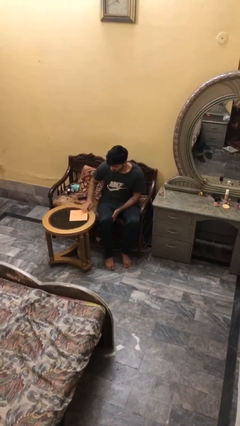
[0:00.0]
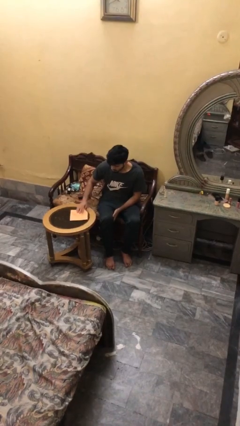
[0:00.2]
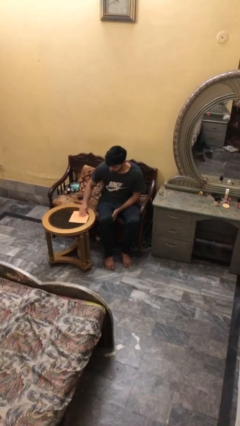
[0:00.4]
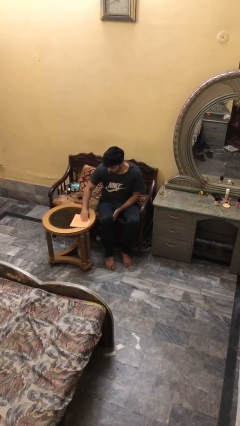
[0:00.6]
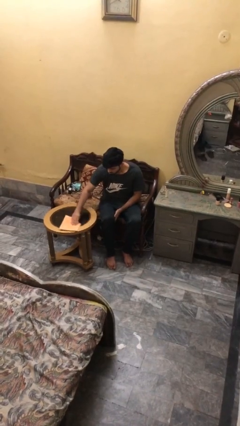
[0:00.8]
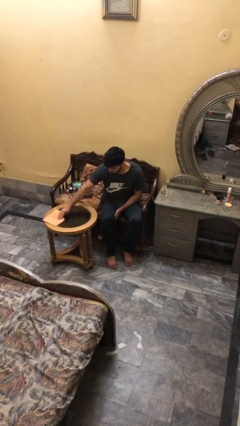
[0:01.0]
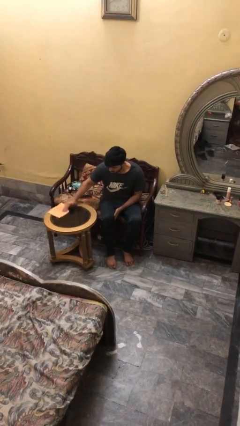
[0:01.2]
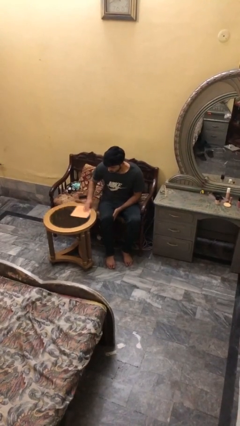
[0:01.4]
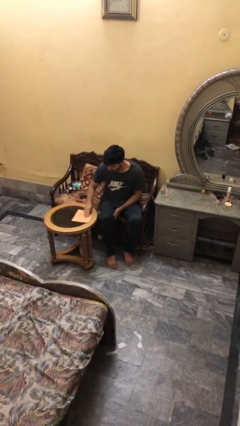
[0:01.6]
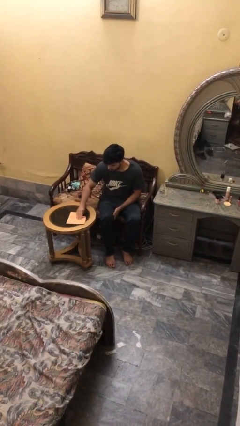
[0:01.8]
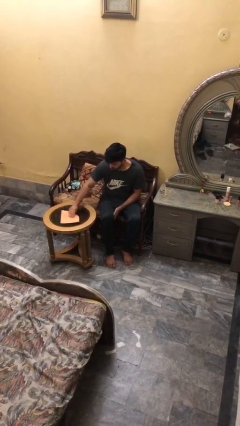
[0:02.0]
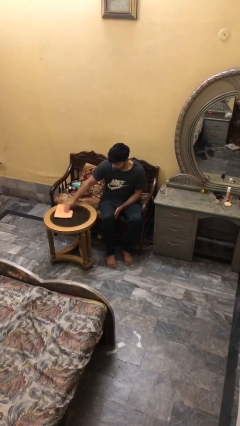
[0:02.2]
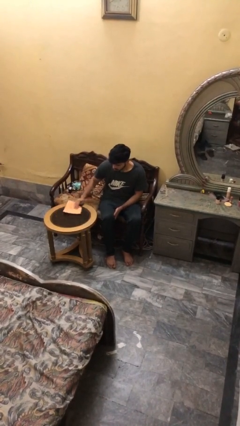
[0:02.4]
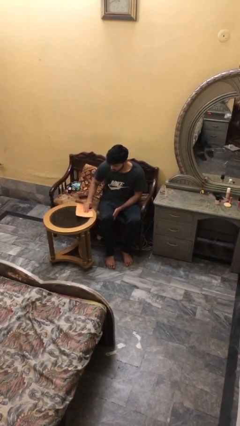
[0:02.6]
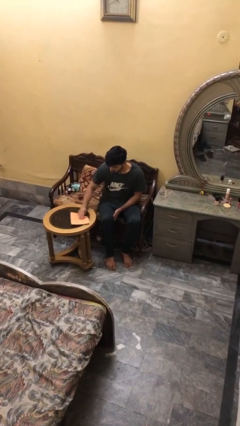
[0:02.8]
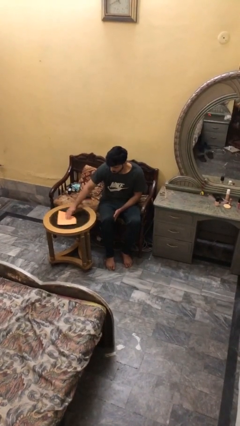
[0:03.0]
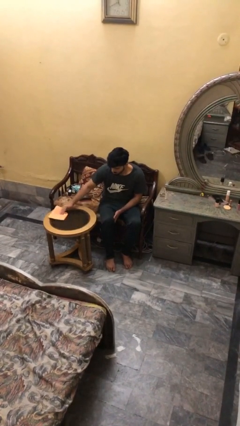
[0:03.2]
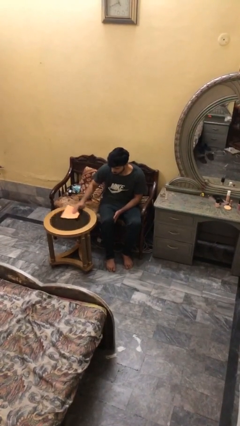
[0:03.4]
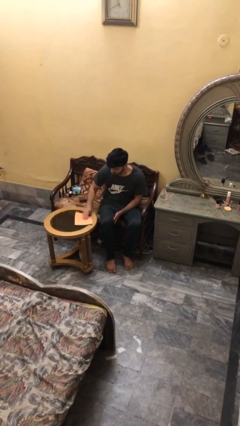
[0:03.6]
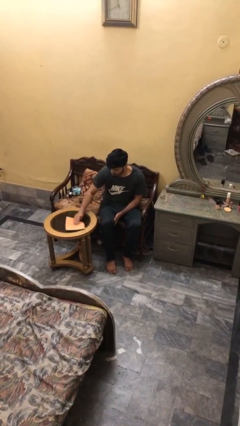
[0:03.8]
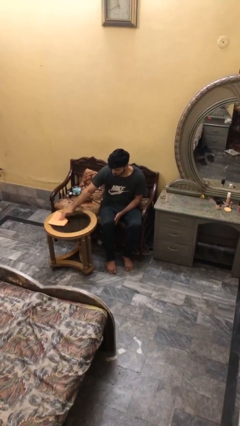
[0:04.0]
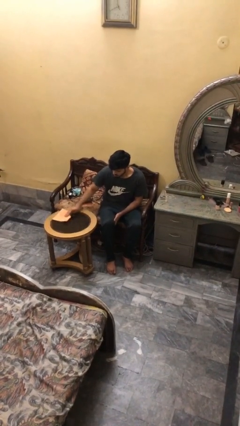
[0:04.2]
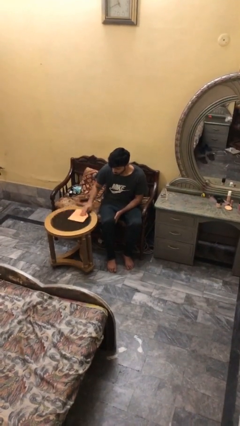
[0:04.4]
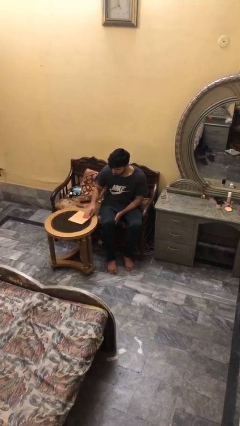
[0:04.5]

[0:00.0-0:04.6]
person cleans table with rag

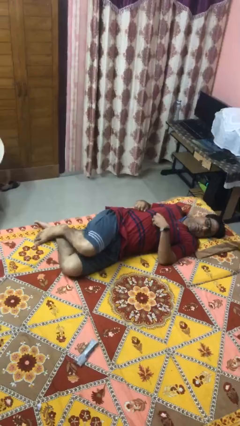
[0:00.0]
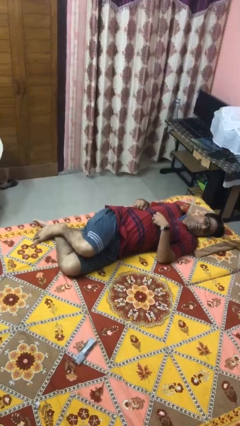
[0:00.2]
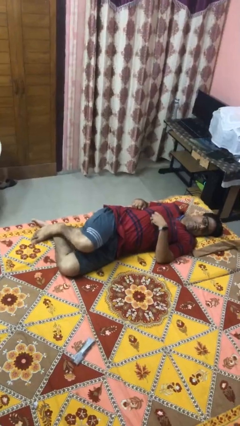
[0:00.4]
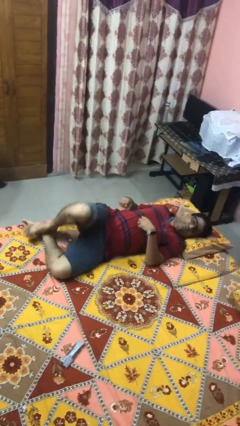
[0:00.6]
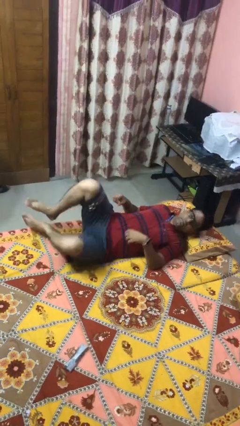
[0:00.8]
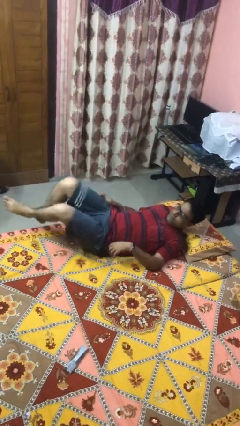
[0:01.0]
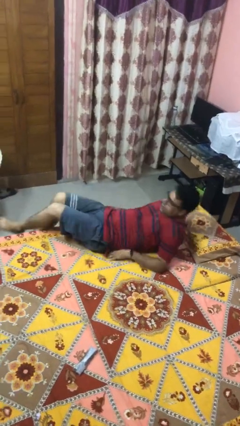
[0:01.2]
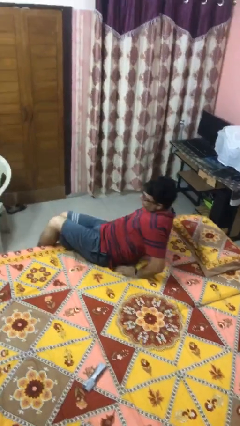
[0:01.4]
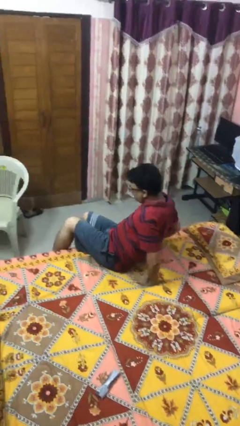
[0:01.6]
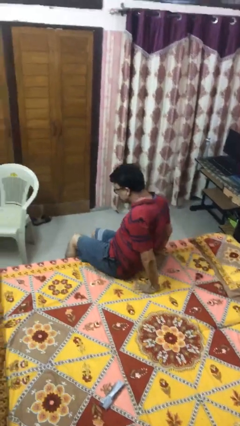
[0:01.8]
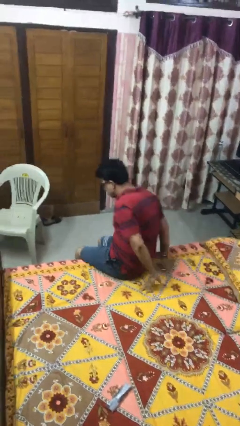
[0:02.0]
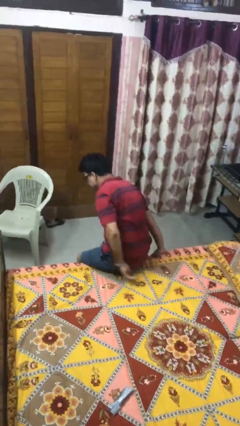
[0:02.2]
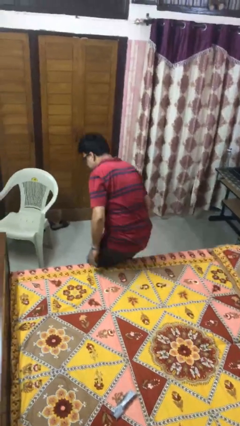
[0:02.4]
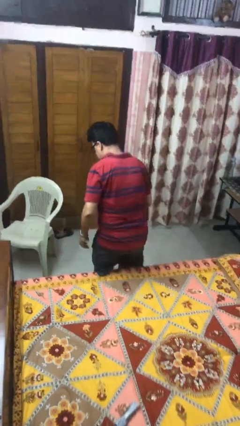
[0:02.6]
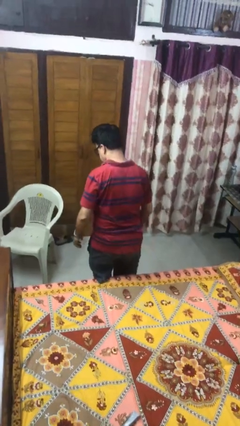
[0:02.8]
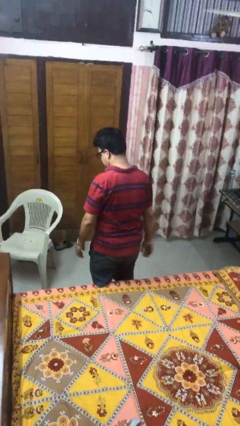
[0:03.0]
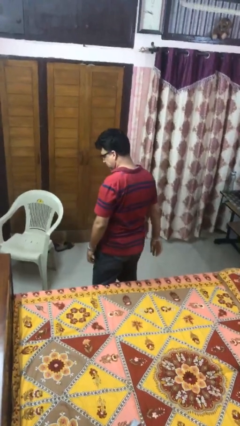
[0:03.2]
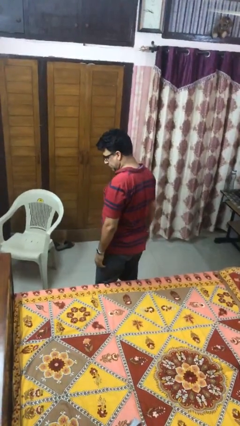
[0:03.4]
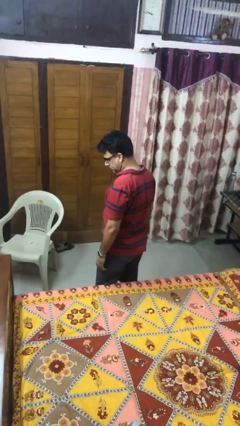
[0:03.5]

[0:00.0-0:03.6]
person stands up

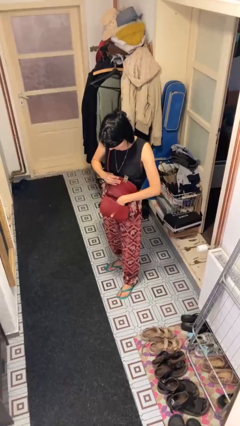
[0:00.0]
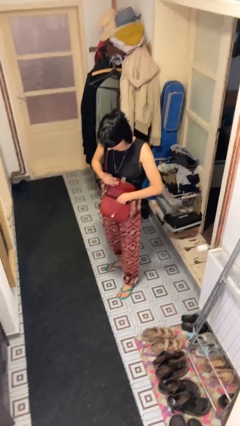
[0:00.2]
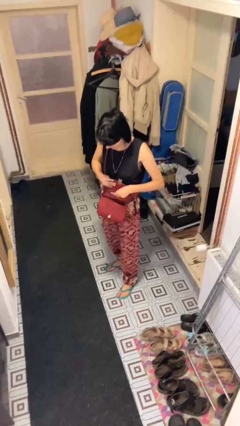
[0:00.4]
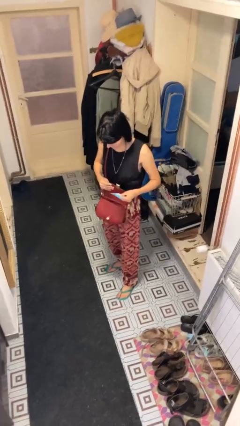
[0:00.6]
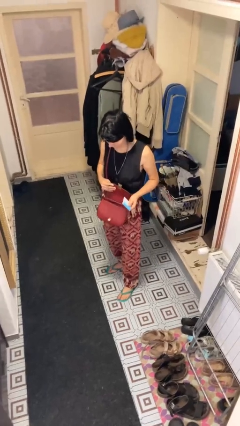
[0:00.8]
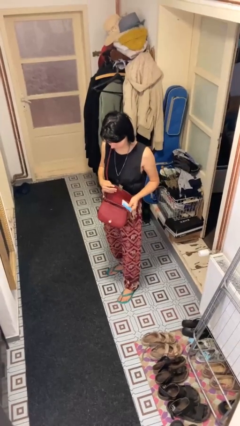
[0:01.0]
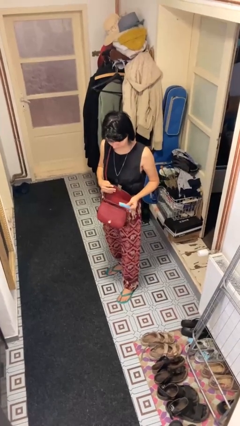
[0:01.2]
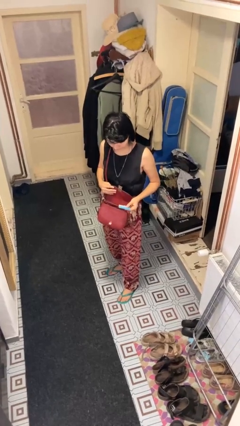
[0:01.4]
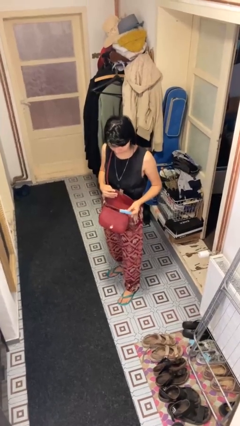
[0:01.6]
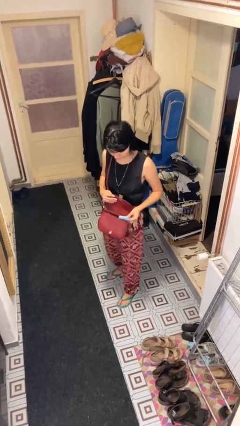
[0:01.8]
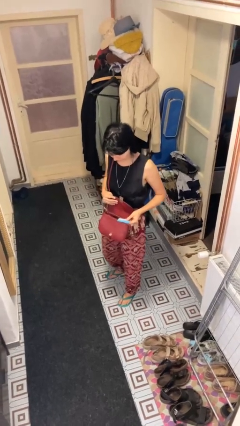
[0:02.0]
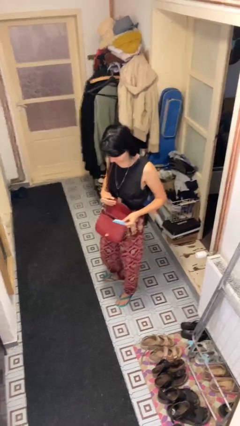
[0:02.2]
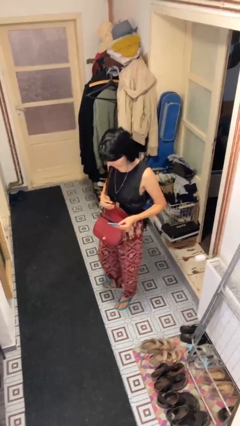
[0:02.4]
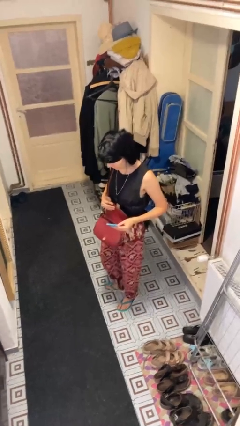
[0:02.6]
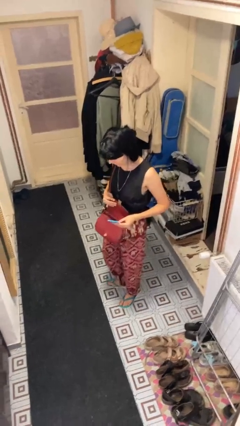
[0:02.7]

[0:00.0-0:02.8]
person takes object from purse

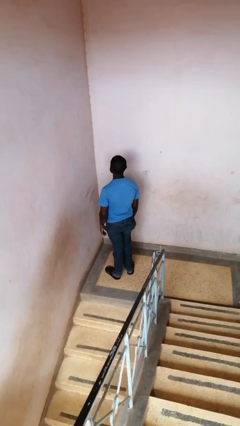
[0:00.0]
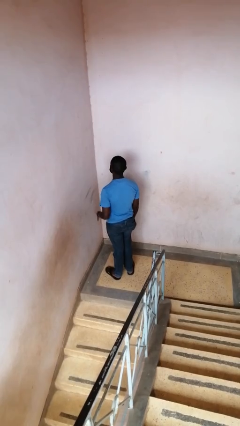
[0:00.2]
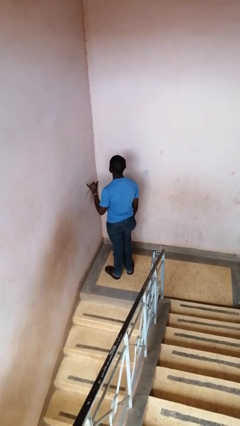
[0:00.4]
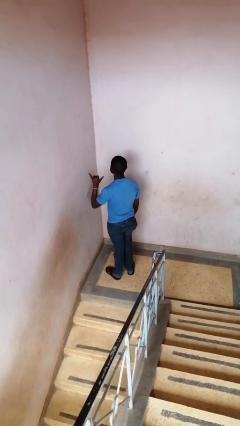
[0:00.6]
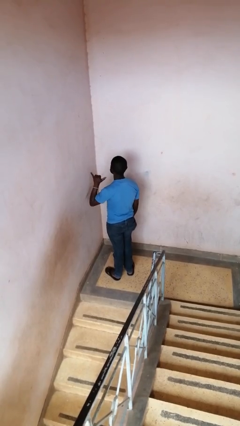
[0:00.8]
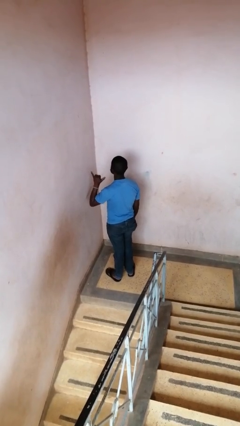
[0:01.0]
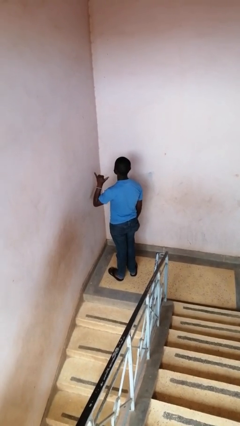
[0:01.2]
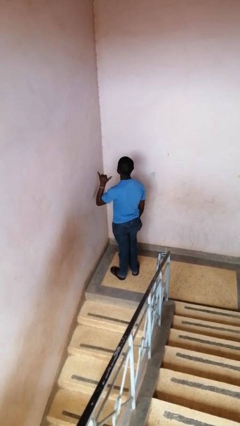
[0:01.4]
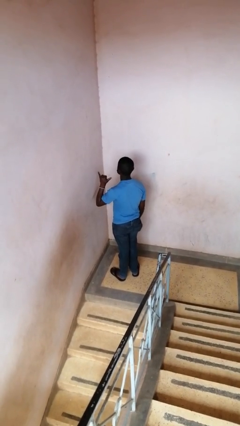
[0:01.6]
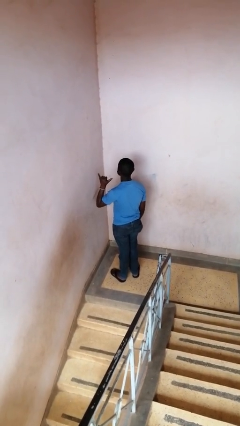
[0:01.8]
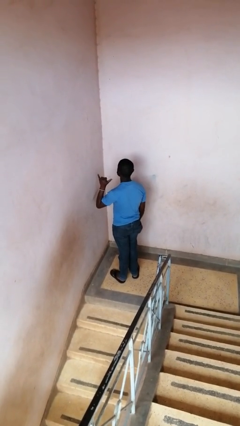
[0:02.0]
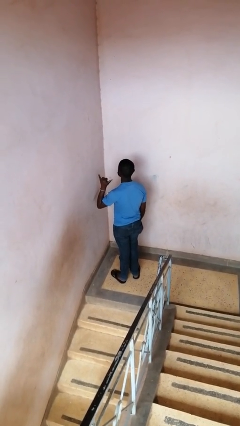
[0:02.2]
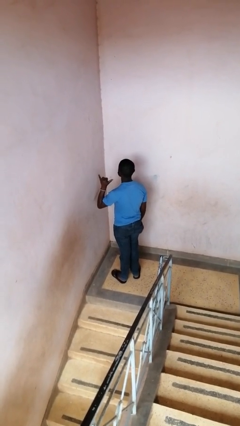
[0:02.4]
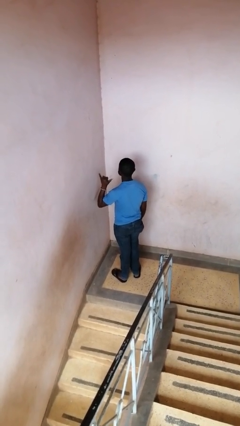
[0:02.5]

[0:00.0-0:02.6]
person gestures hang loose

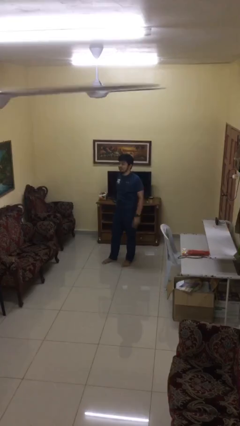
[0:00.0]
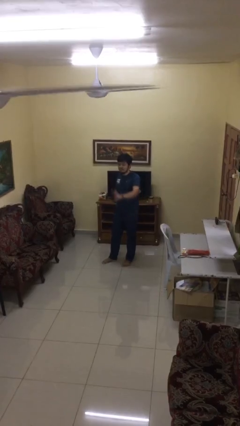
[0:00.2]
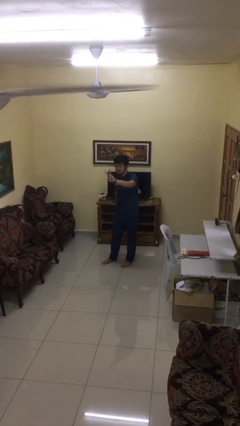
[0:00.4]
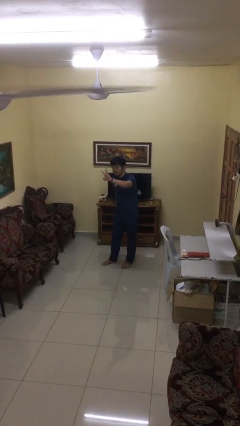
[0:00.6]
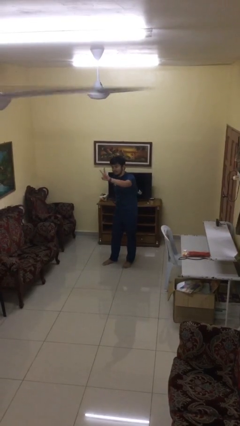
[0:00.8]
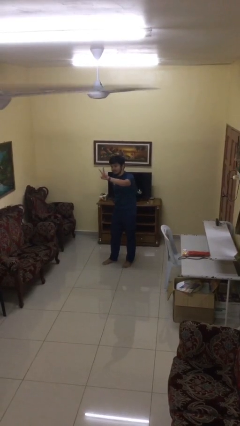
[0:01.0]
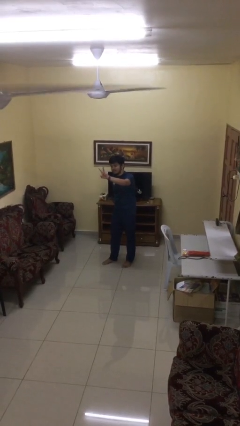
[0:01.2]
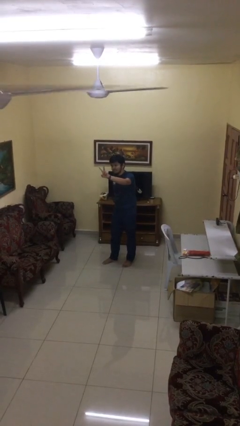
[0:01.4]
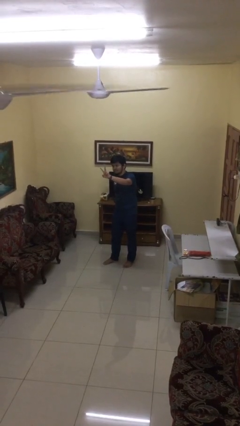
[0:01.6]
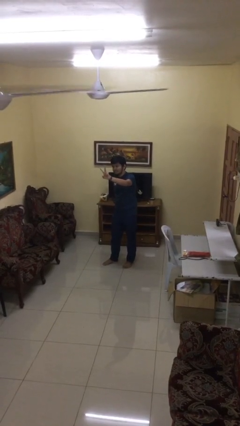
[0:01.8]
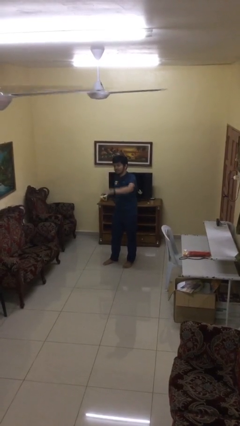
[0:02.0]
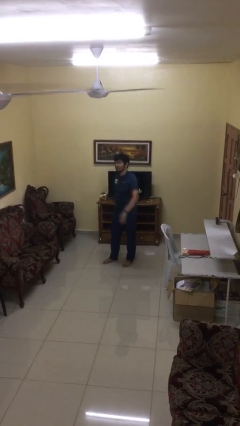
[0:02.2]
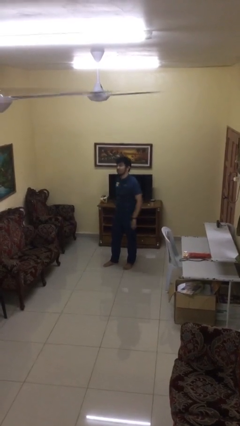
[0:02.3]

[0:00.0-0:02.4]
person gestures peace

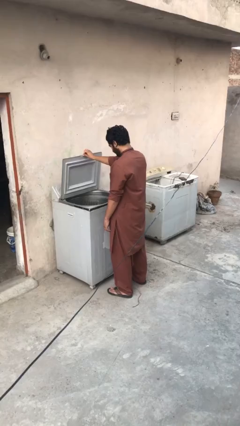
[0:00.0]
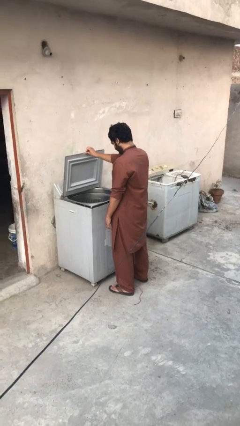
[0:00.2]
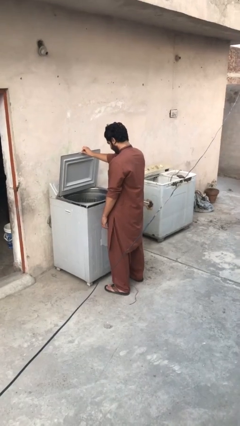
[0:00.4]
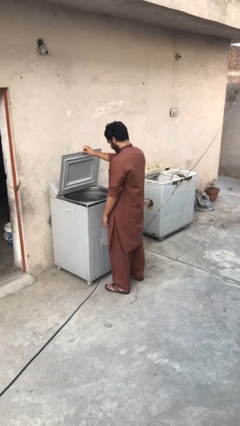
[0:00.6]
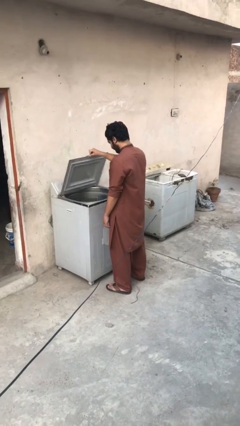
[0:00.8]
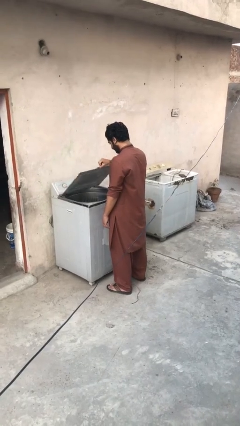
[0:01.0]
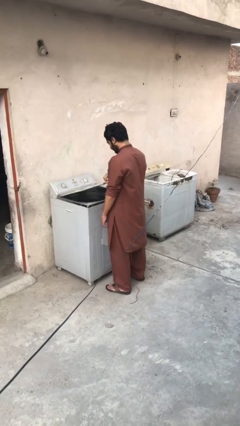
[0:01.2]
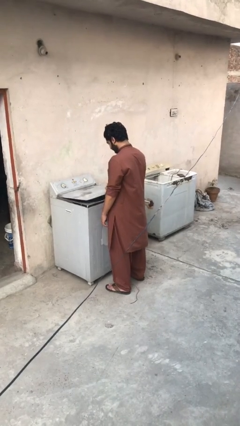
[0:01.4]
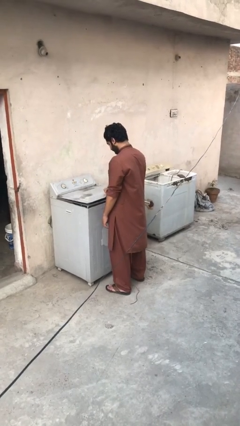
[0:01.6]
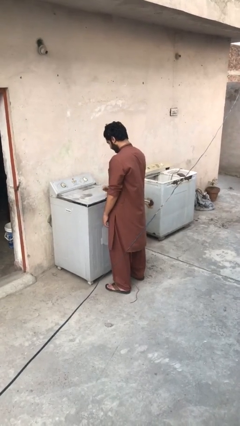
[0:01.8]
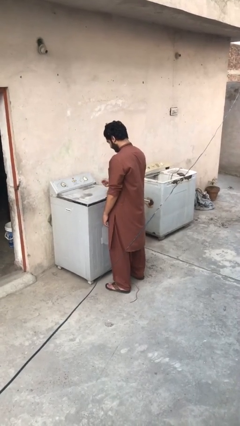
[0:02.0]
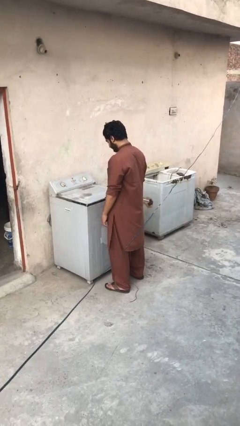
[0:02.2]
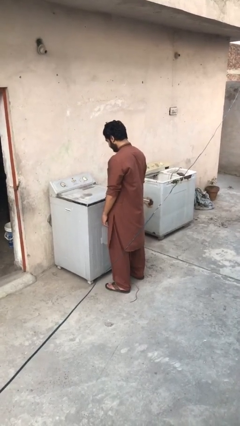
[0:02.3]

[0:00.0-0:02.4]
person closes clothes washer
